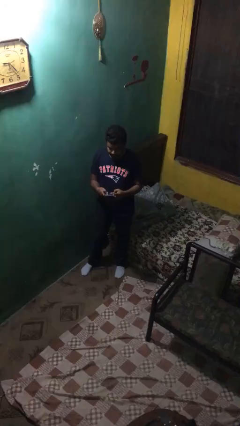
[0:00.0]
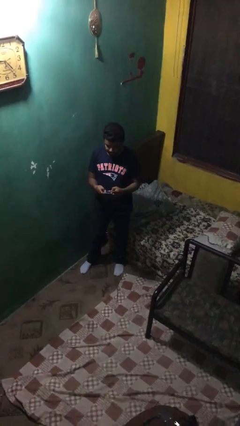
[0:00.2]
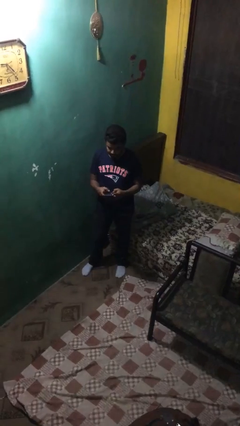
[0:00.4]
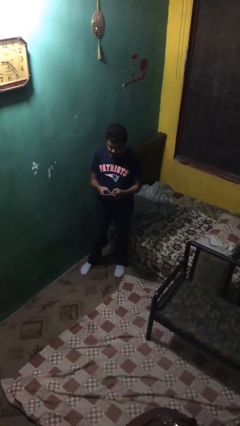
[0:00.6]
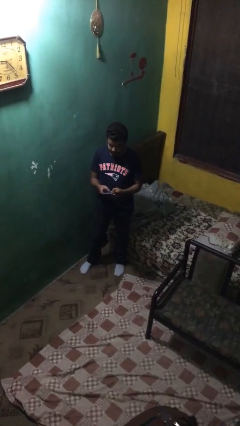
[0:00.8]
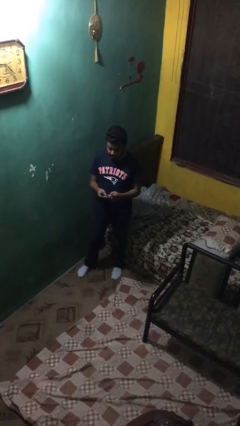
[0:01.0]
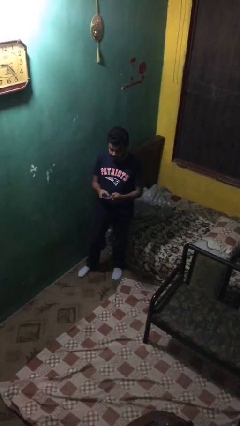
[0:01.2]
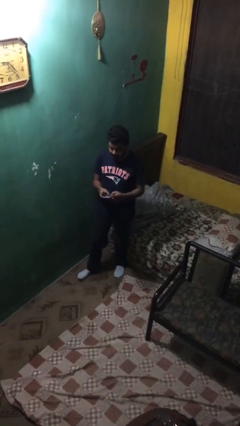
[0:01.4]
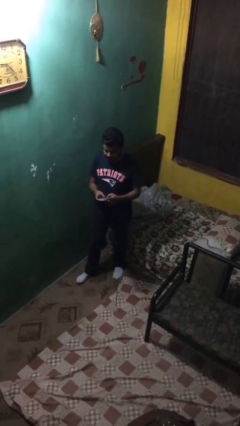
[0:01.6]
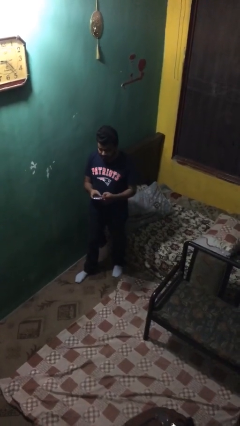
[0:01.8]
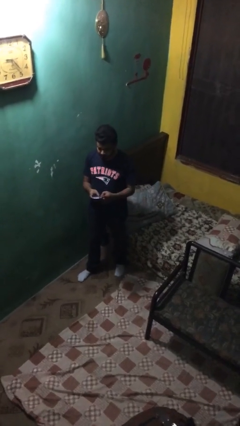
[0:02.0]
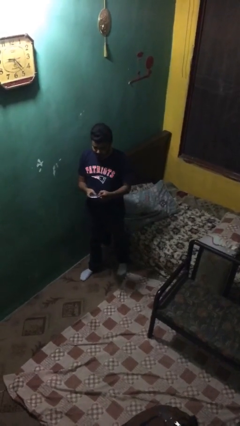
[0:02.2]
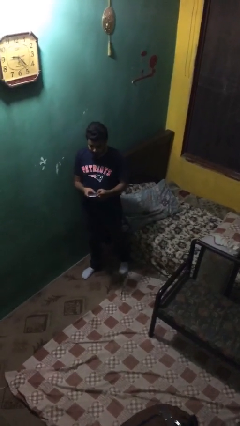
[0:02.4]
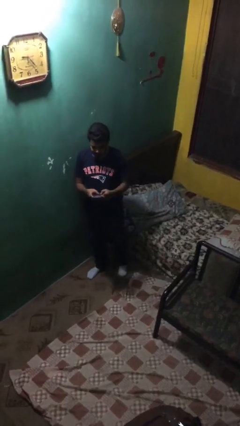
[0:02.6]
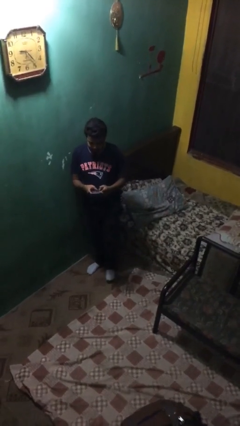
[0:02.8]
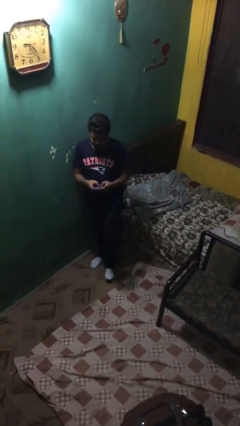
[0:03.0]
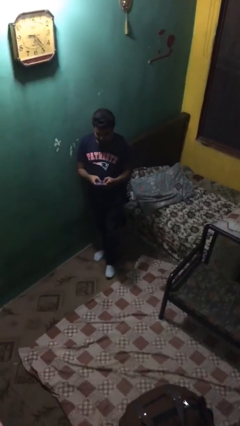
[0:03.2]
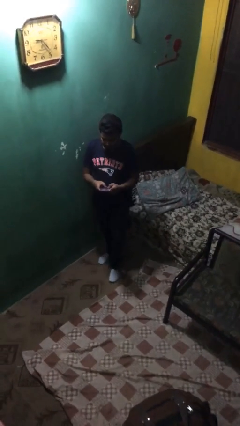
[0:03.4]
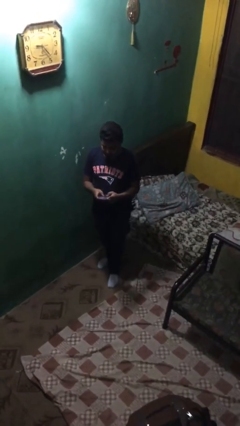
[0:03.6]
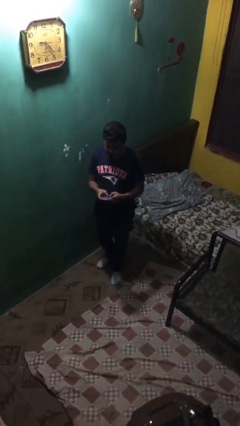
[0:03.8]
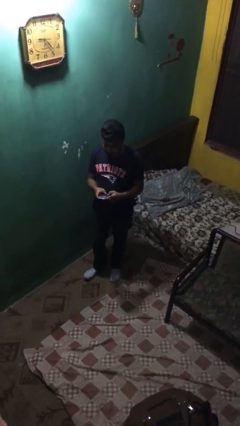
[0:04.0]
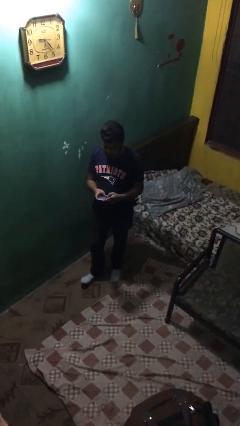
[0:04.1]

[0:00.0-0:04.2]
person texts on phone

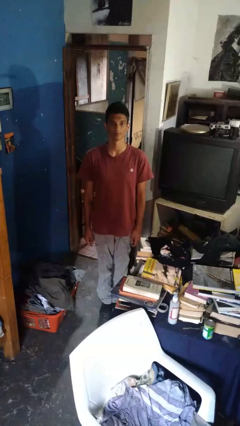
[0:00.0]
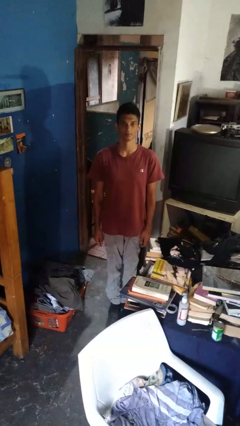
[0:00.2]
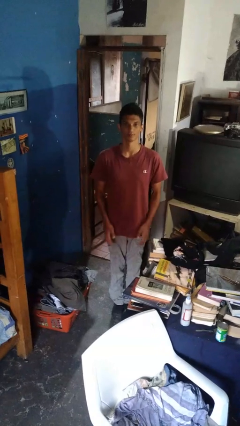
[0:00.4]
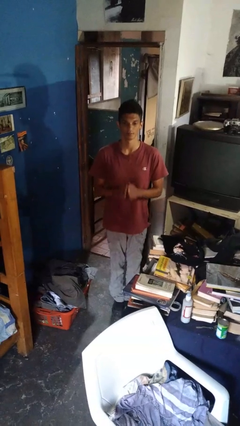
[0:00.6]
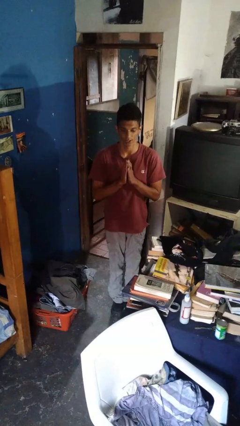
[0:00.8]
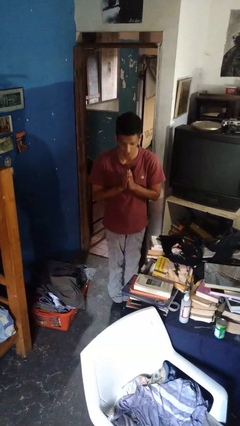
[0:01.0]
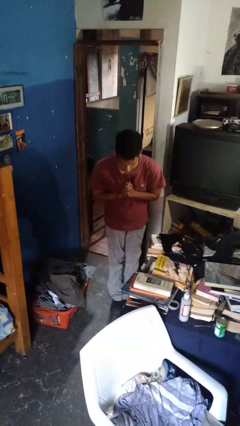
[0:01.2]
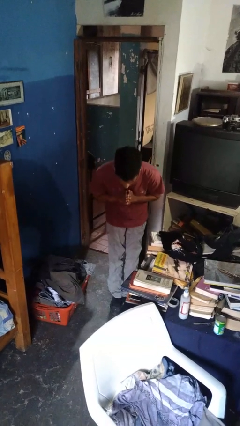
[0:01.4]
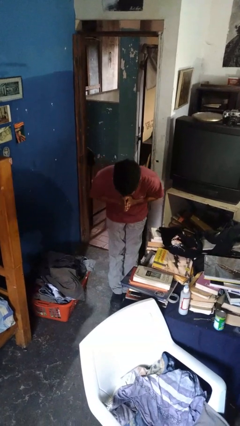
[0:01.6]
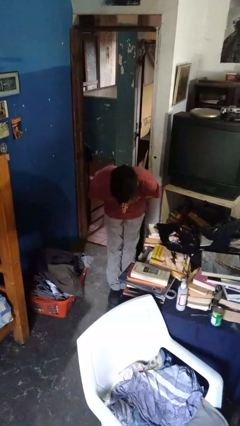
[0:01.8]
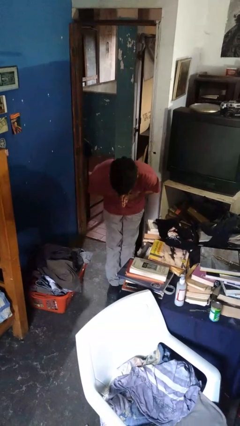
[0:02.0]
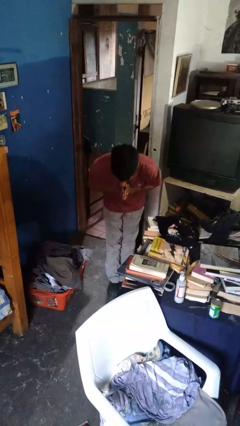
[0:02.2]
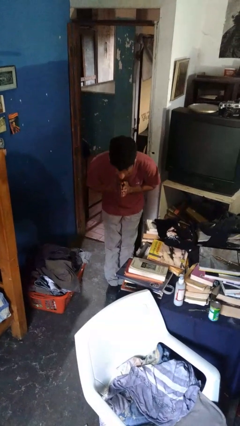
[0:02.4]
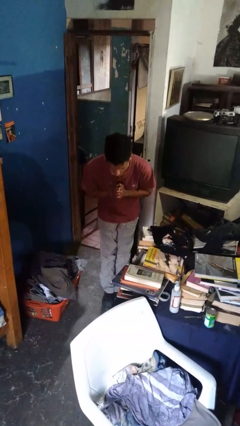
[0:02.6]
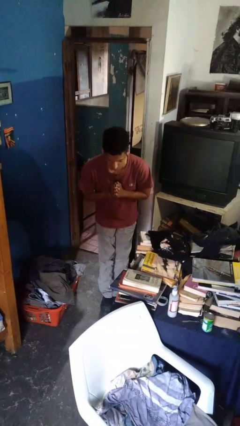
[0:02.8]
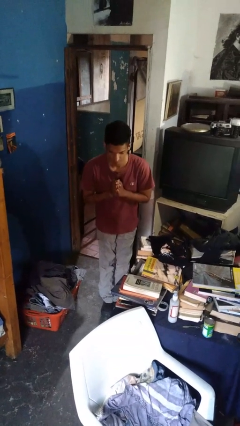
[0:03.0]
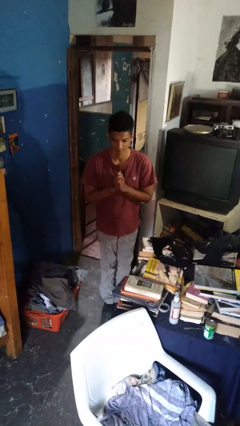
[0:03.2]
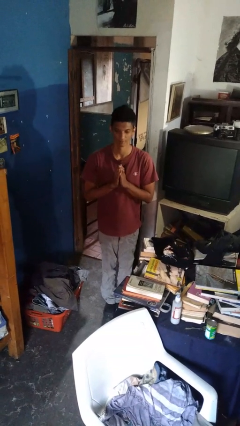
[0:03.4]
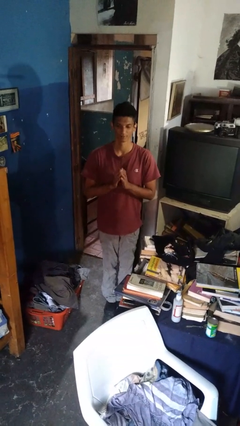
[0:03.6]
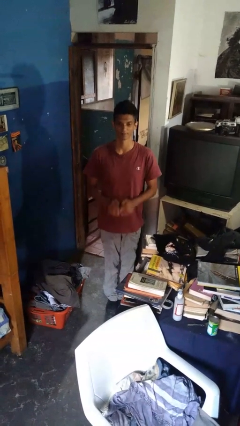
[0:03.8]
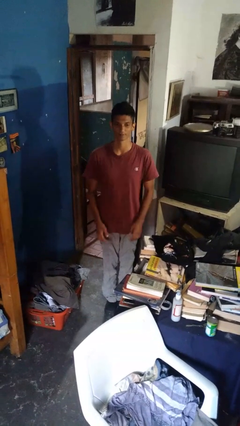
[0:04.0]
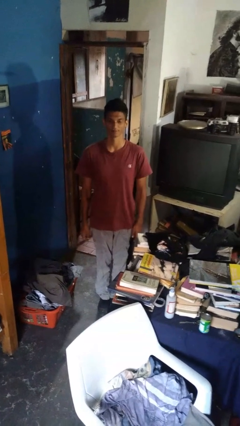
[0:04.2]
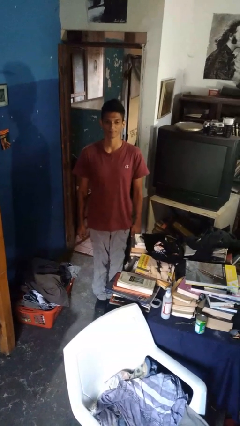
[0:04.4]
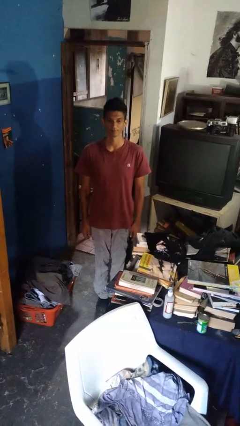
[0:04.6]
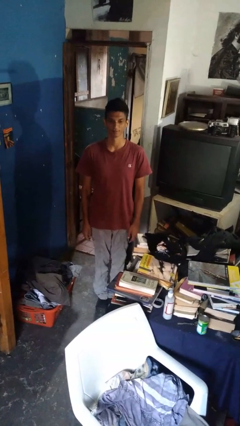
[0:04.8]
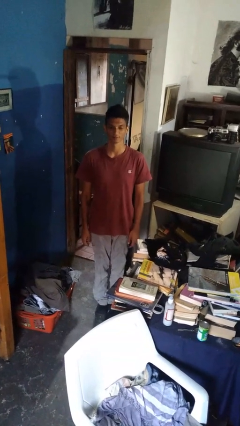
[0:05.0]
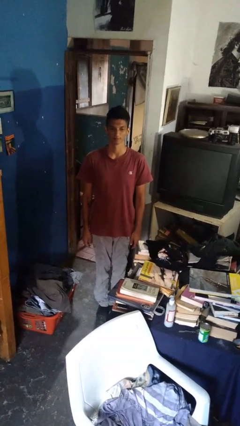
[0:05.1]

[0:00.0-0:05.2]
person bows

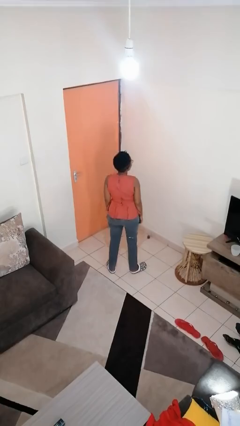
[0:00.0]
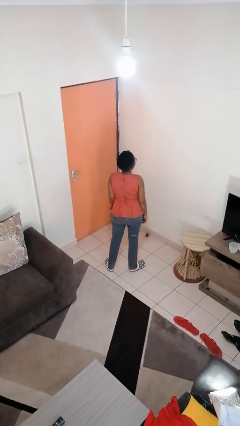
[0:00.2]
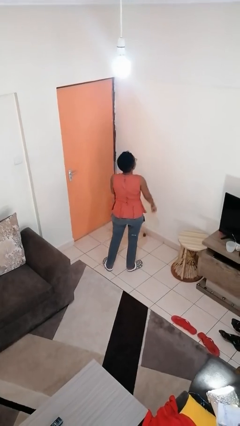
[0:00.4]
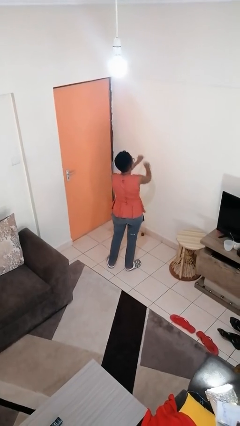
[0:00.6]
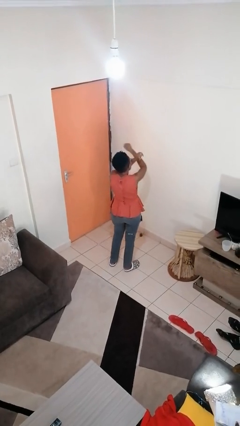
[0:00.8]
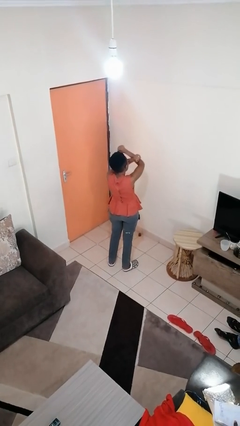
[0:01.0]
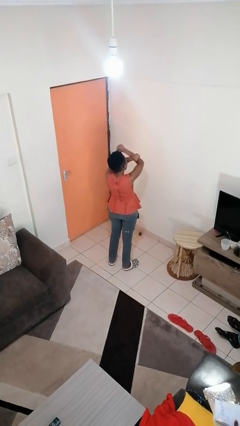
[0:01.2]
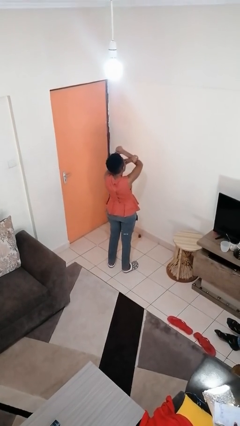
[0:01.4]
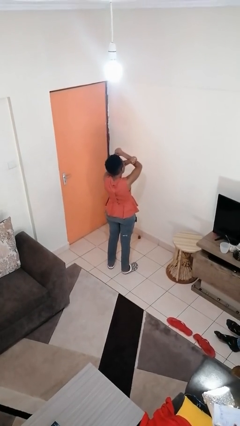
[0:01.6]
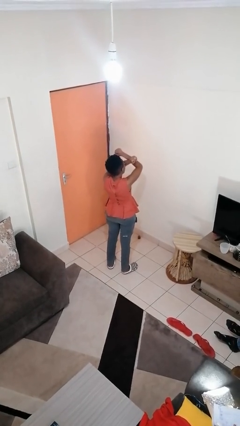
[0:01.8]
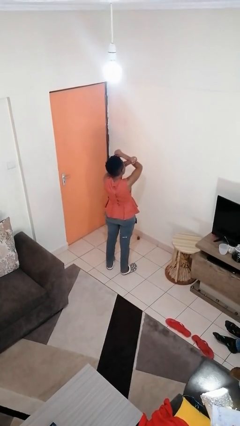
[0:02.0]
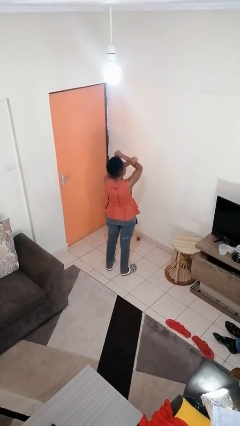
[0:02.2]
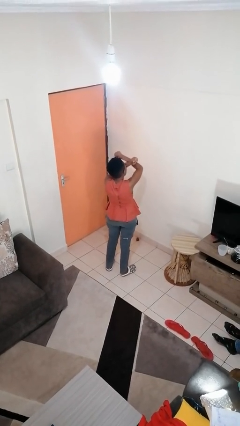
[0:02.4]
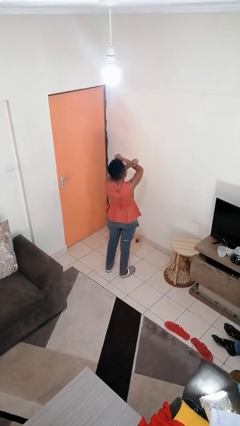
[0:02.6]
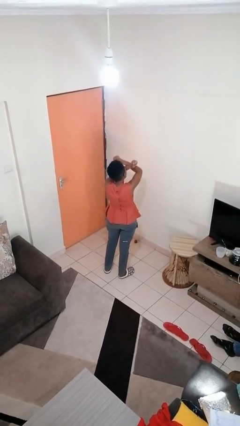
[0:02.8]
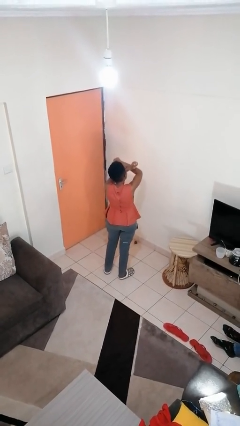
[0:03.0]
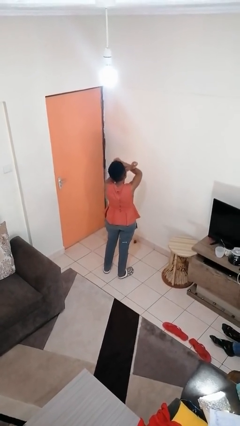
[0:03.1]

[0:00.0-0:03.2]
person gestures arms x

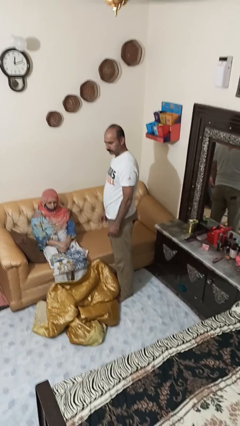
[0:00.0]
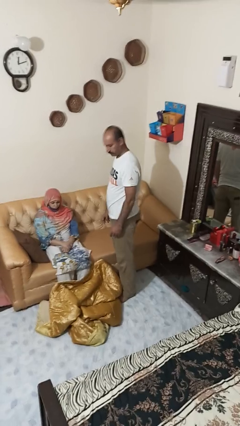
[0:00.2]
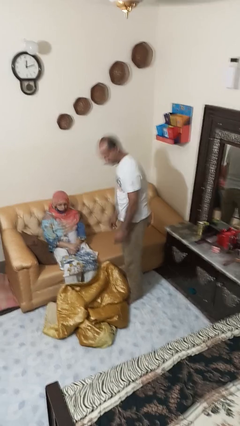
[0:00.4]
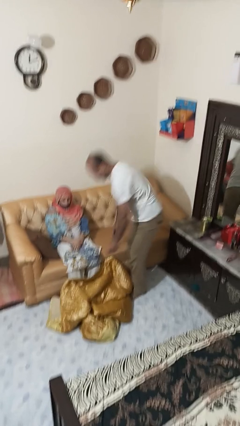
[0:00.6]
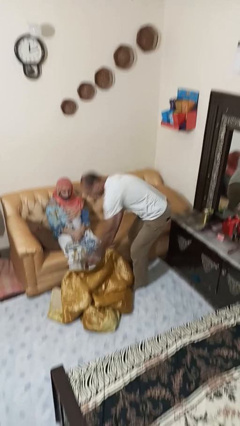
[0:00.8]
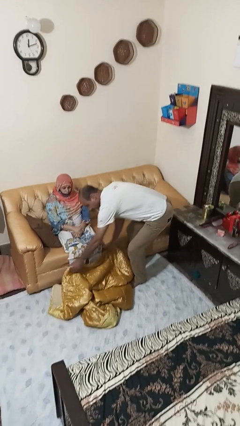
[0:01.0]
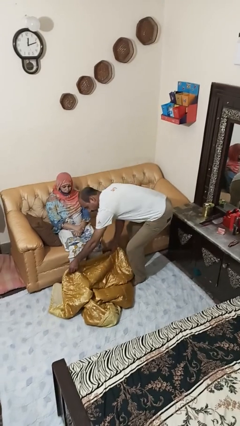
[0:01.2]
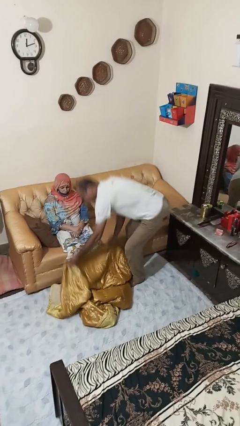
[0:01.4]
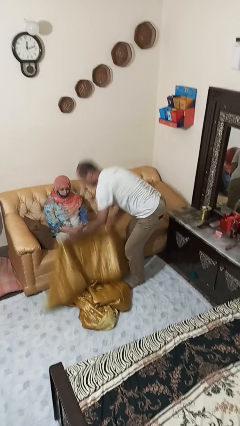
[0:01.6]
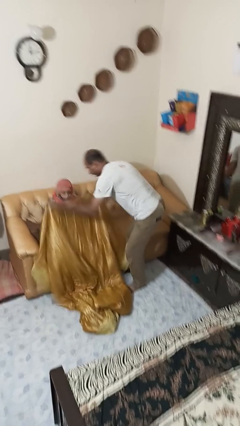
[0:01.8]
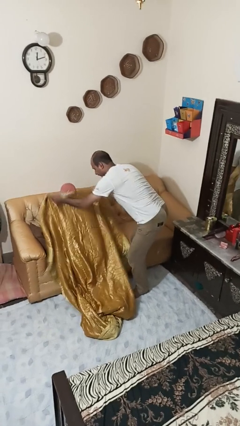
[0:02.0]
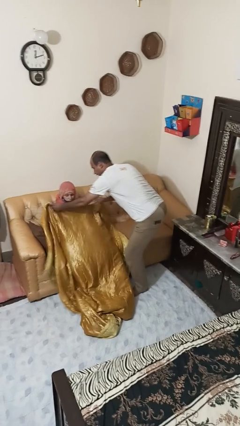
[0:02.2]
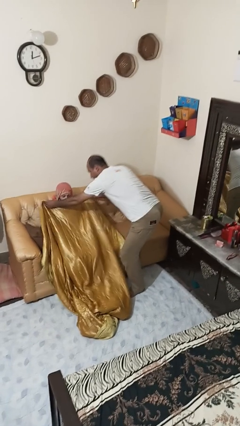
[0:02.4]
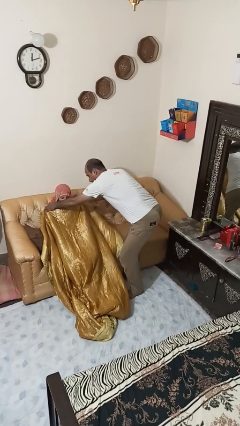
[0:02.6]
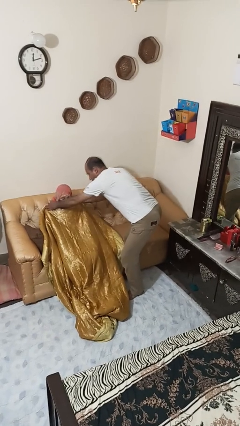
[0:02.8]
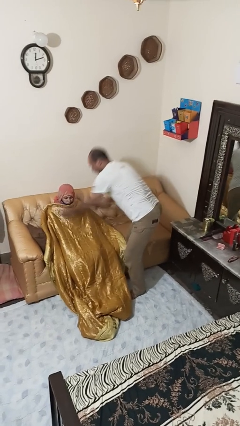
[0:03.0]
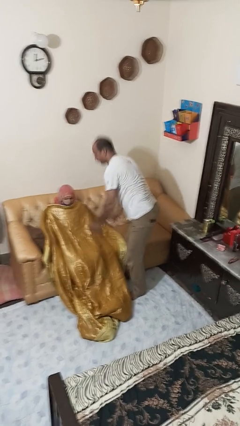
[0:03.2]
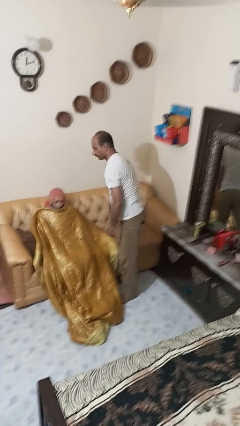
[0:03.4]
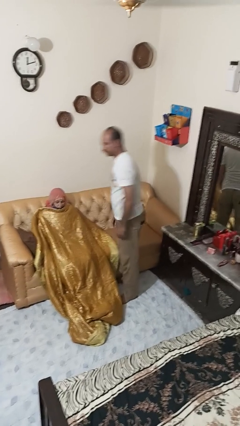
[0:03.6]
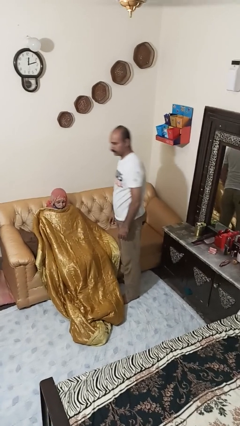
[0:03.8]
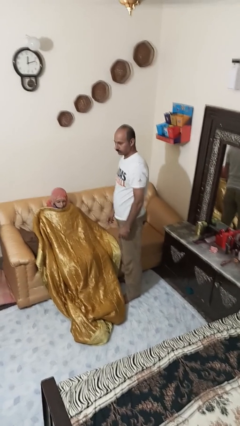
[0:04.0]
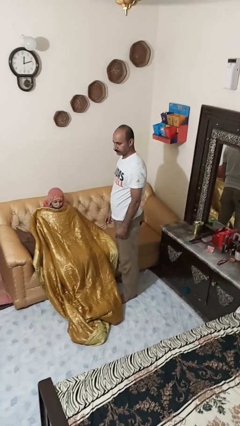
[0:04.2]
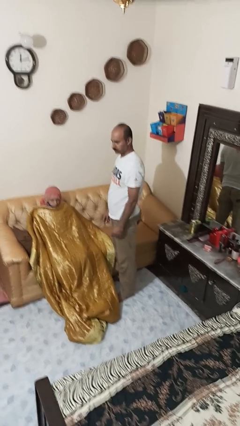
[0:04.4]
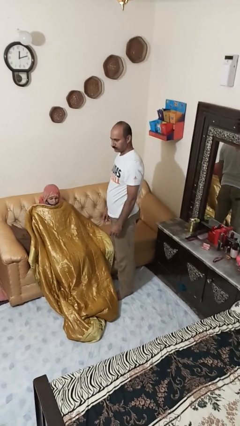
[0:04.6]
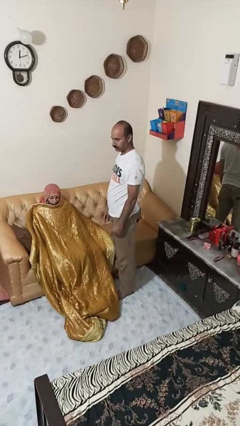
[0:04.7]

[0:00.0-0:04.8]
person covers friend with blanket
